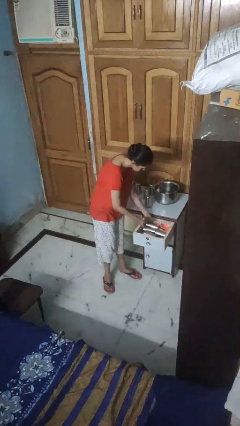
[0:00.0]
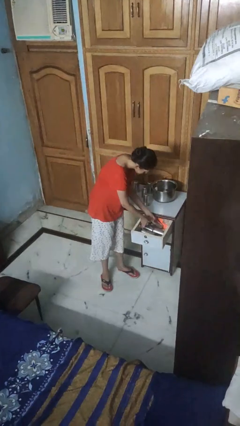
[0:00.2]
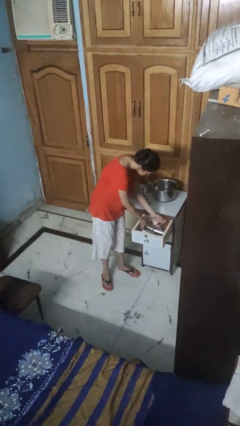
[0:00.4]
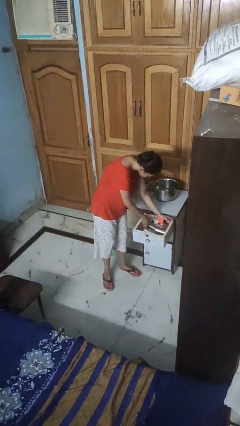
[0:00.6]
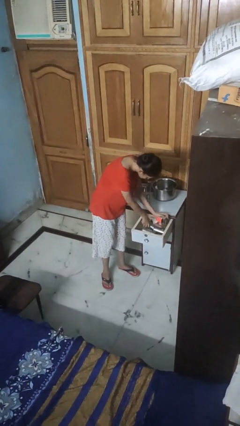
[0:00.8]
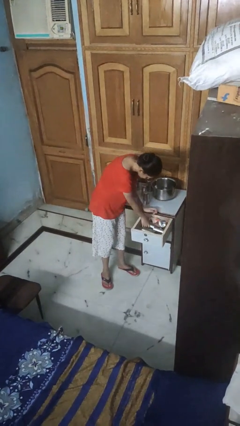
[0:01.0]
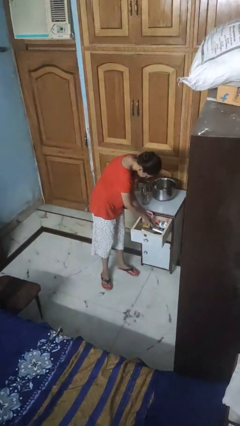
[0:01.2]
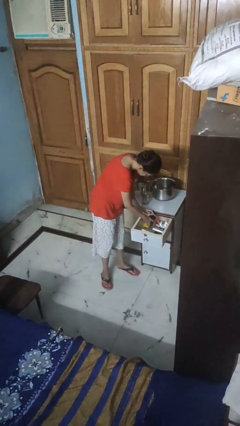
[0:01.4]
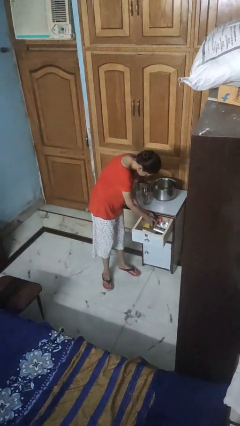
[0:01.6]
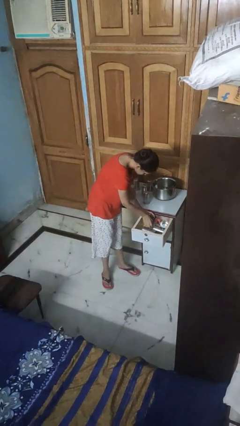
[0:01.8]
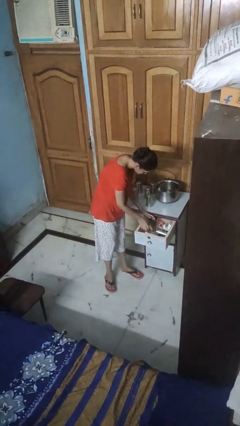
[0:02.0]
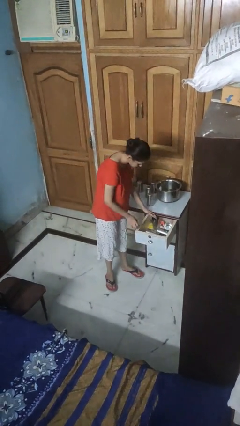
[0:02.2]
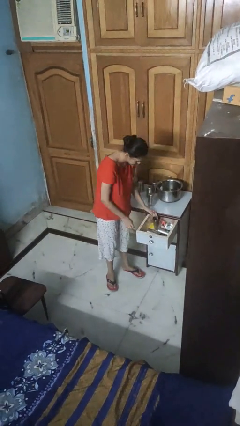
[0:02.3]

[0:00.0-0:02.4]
person searches in kitchen drawer

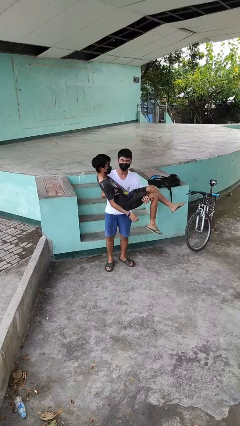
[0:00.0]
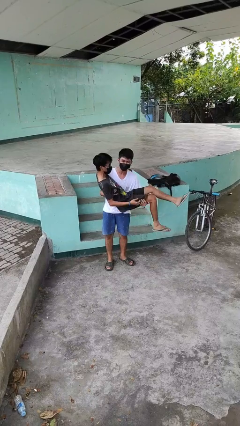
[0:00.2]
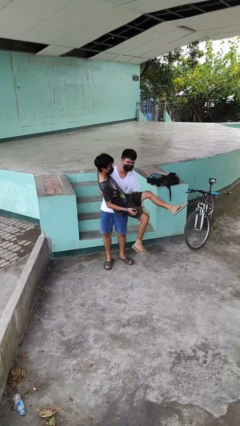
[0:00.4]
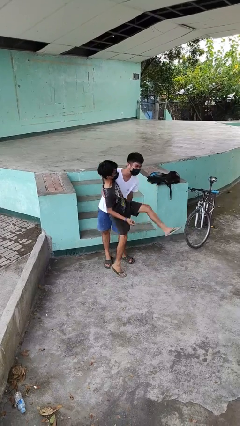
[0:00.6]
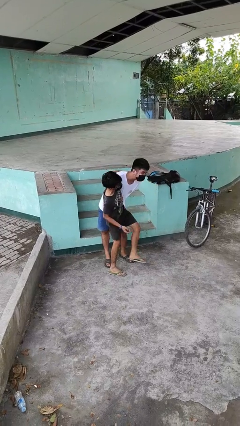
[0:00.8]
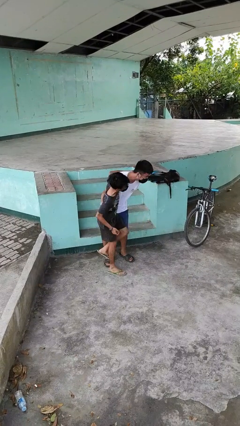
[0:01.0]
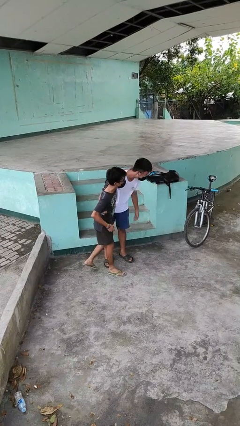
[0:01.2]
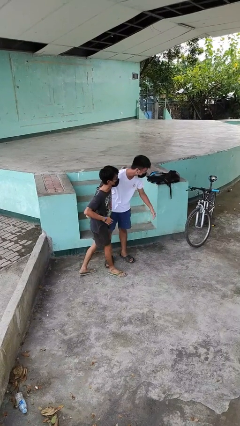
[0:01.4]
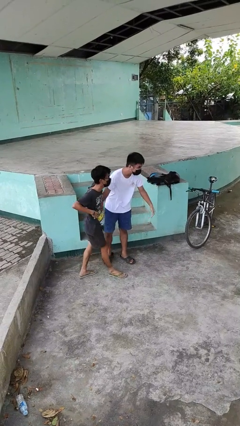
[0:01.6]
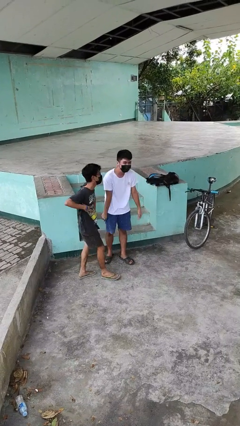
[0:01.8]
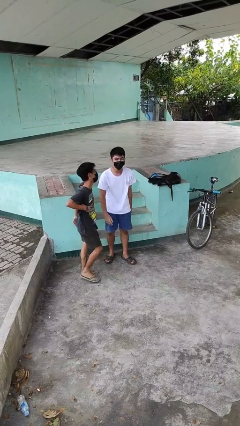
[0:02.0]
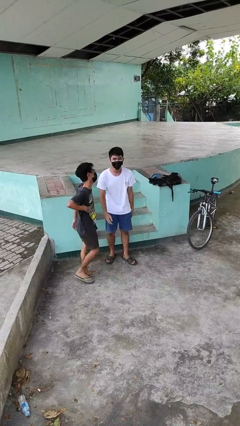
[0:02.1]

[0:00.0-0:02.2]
person puts down person

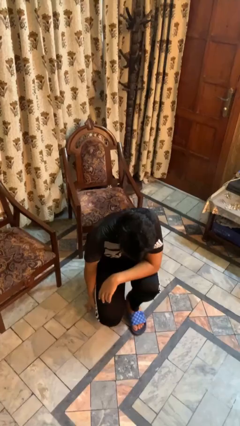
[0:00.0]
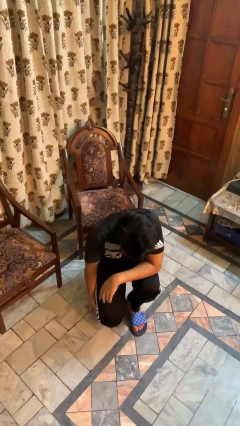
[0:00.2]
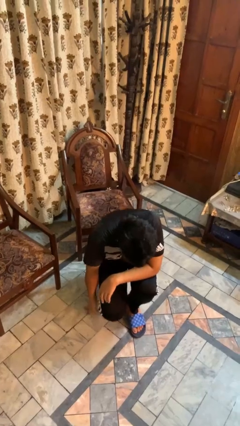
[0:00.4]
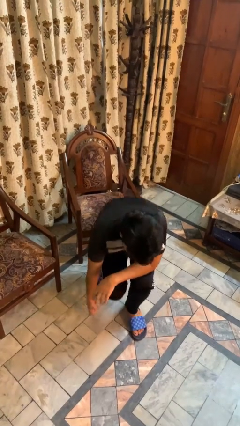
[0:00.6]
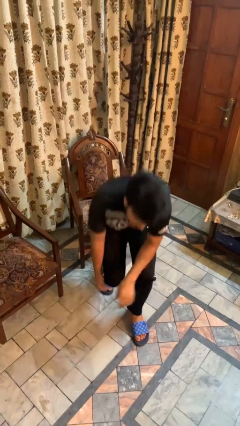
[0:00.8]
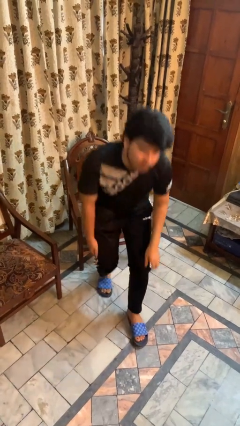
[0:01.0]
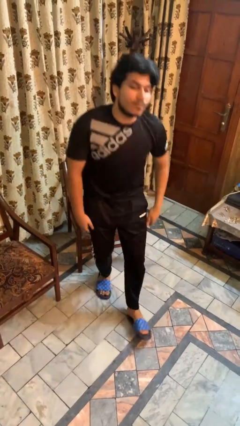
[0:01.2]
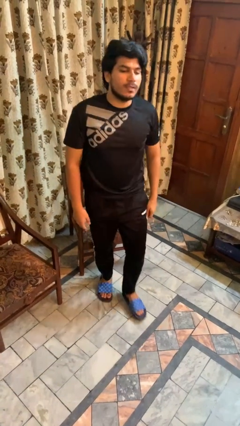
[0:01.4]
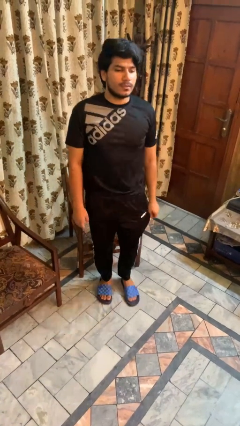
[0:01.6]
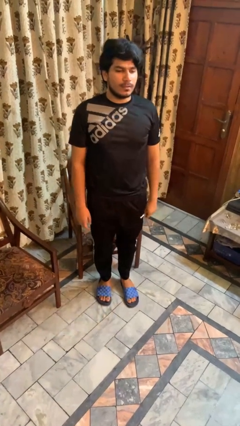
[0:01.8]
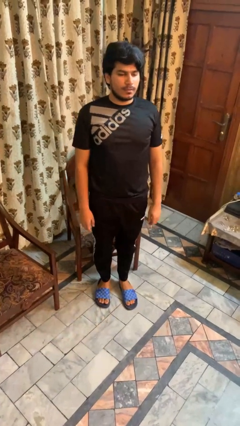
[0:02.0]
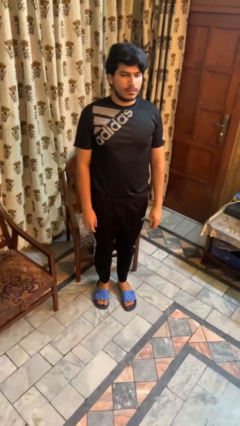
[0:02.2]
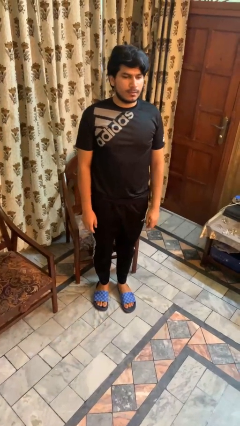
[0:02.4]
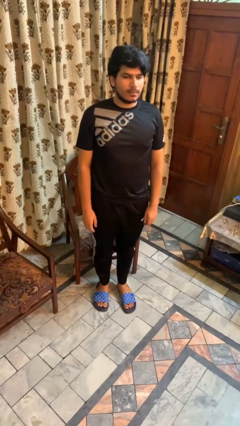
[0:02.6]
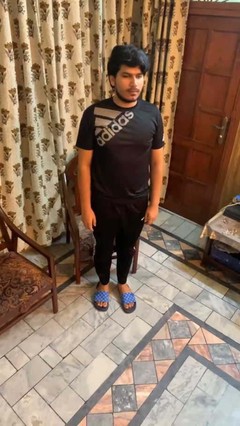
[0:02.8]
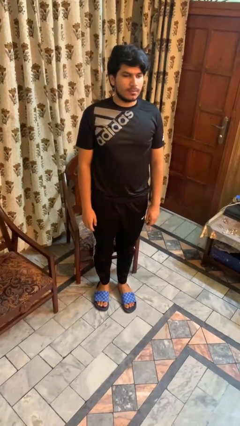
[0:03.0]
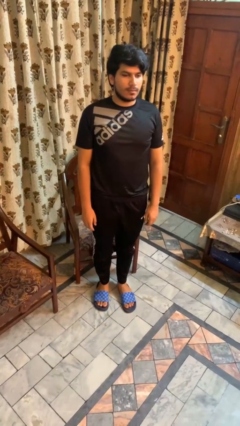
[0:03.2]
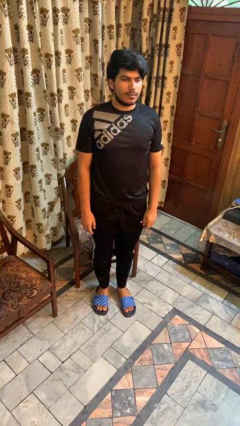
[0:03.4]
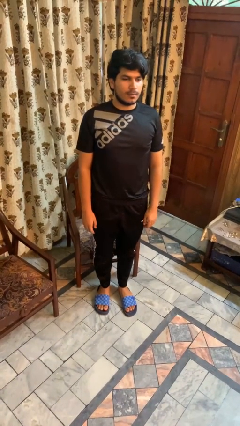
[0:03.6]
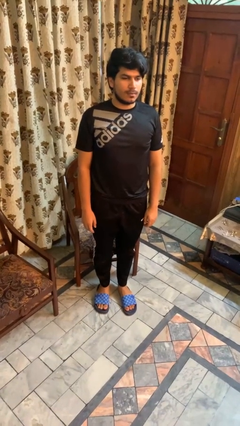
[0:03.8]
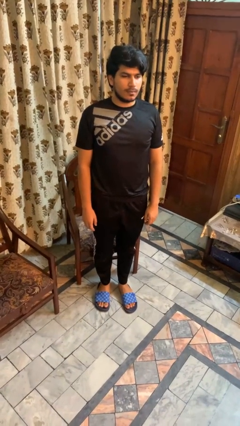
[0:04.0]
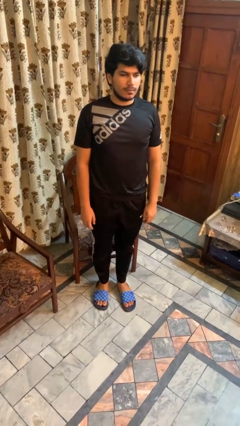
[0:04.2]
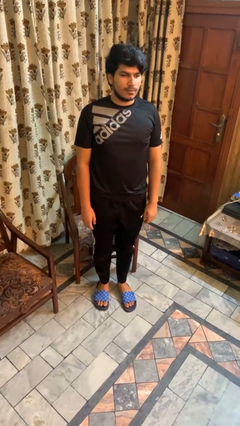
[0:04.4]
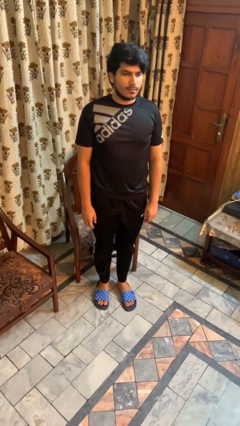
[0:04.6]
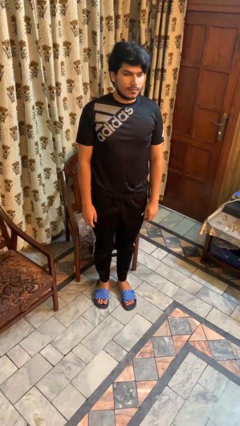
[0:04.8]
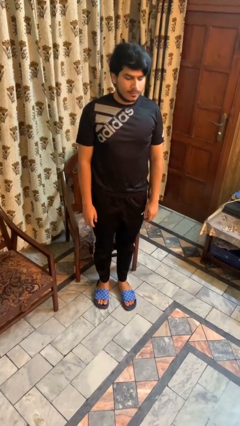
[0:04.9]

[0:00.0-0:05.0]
person stands up from floor

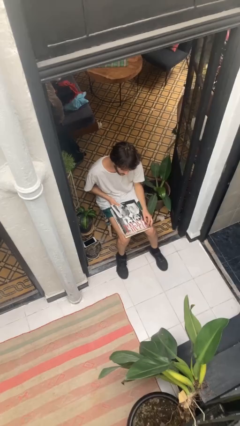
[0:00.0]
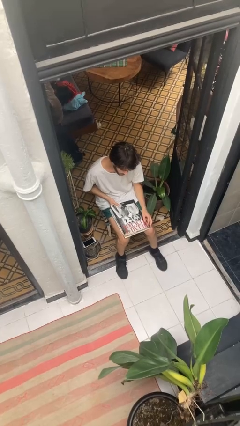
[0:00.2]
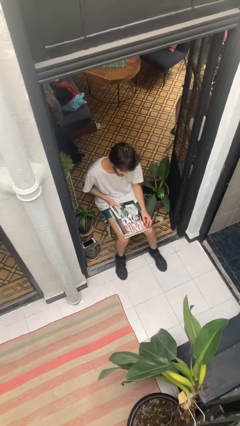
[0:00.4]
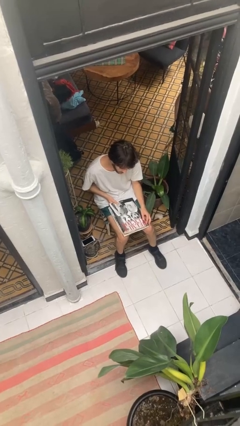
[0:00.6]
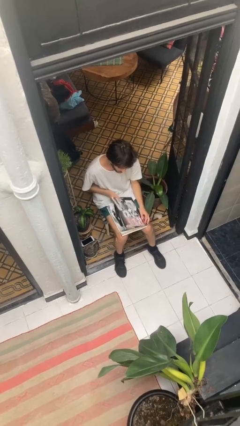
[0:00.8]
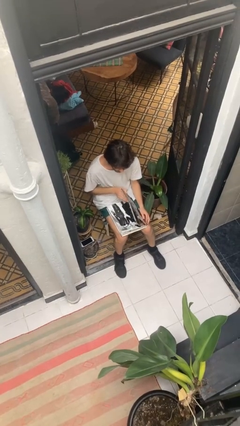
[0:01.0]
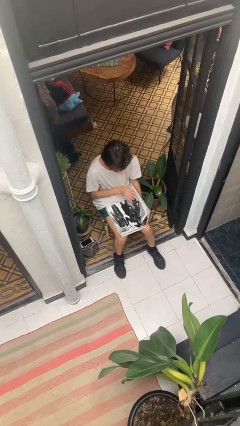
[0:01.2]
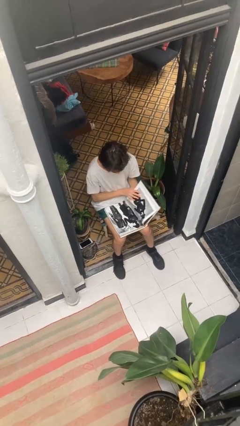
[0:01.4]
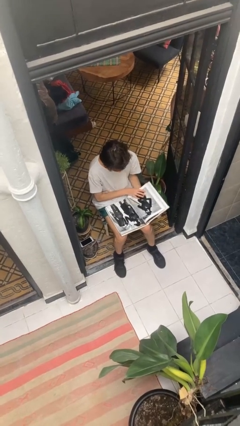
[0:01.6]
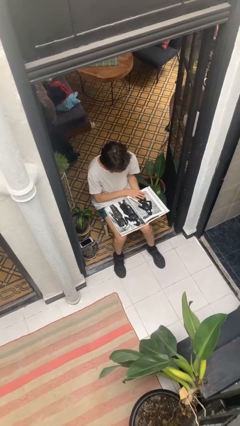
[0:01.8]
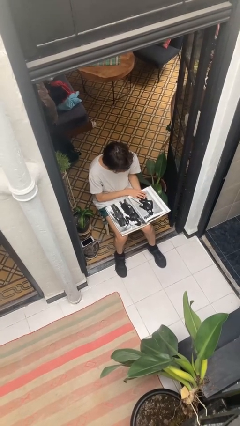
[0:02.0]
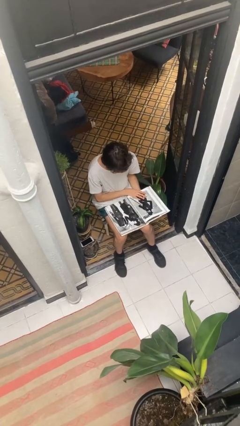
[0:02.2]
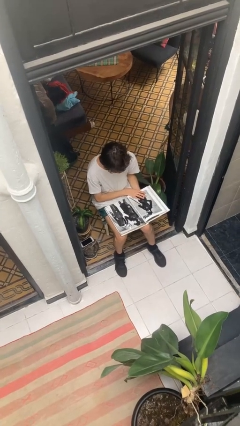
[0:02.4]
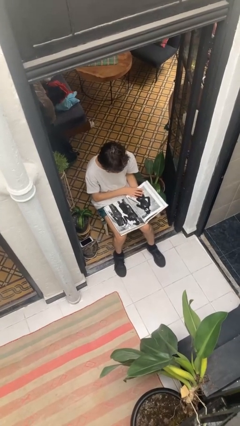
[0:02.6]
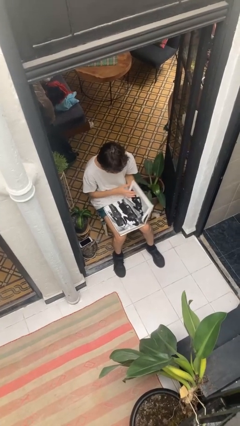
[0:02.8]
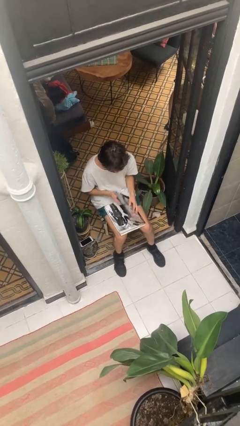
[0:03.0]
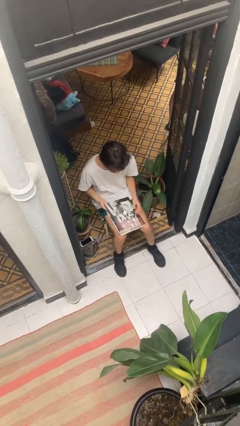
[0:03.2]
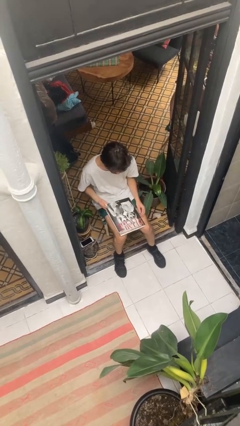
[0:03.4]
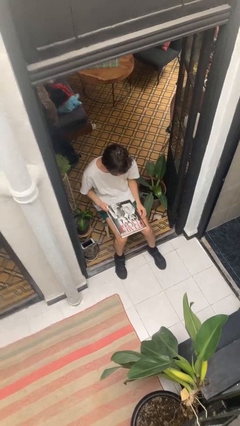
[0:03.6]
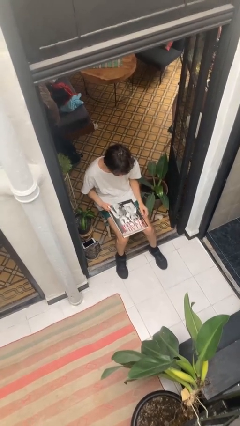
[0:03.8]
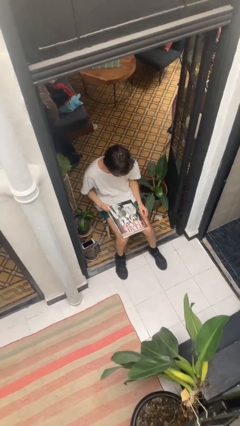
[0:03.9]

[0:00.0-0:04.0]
person reads document

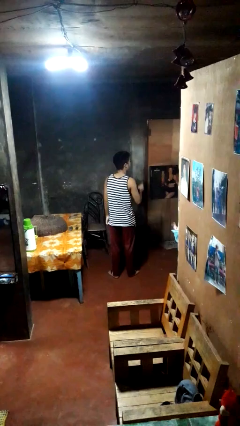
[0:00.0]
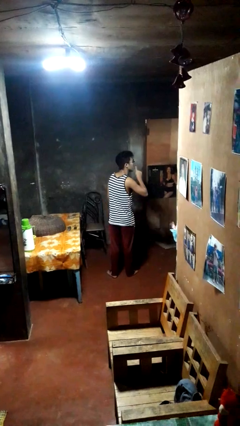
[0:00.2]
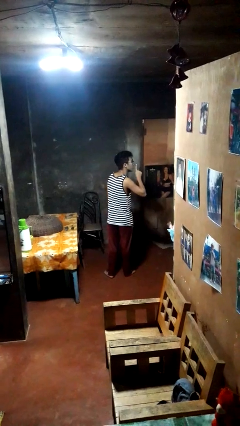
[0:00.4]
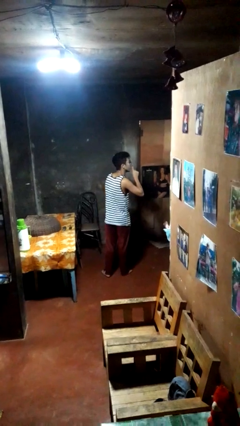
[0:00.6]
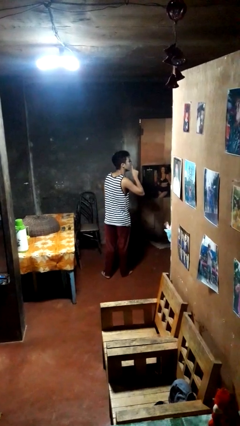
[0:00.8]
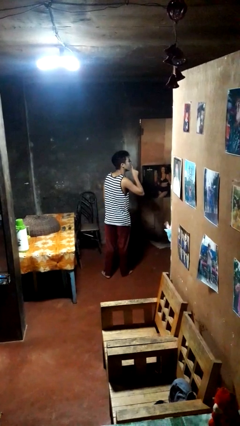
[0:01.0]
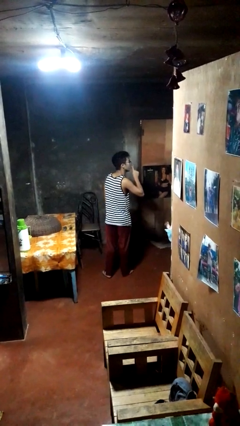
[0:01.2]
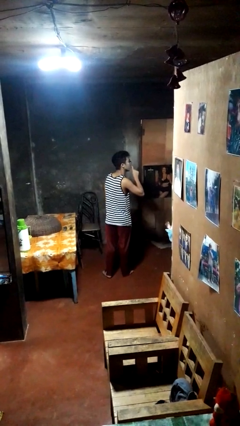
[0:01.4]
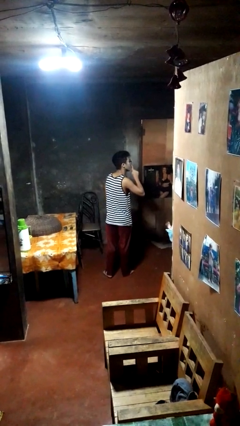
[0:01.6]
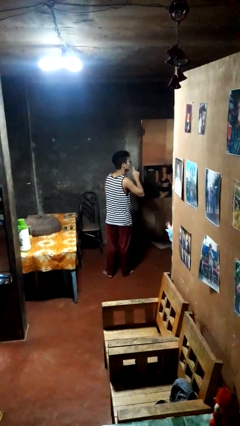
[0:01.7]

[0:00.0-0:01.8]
person gestures be quiet

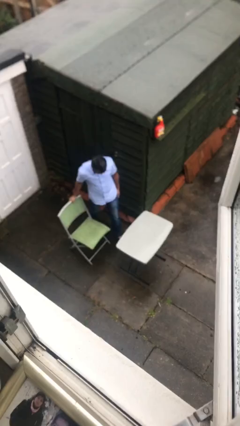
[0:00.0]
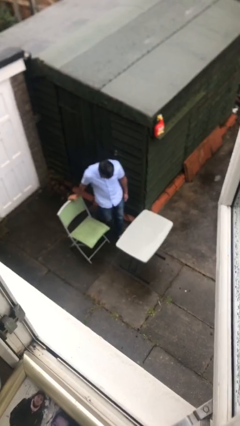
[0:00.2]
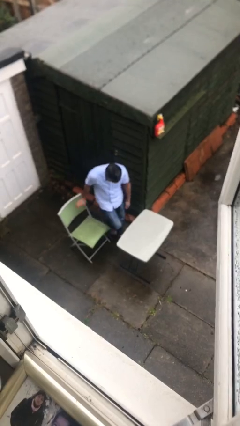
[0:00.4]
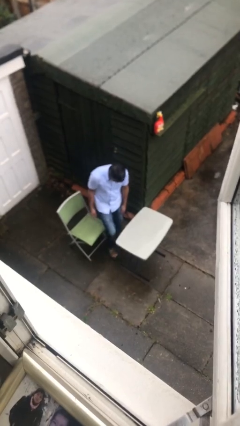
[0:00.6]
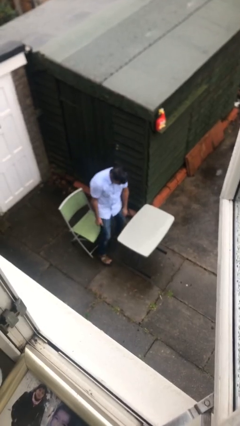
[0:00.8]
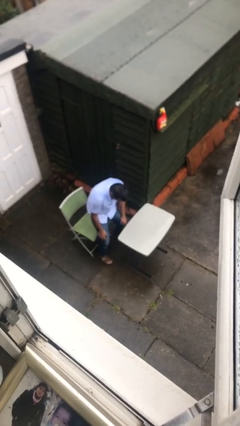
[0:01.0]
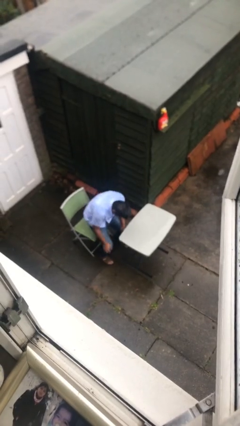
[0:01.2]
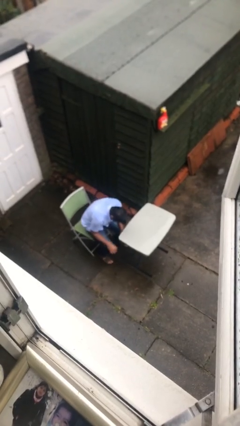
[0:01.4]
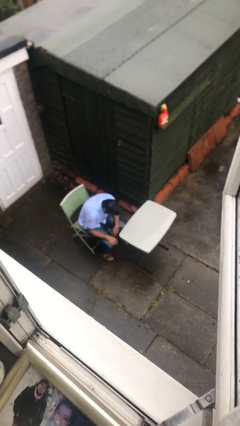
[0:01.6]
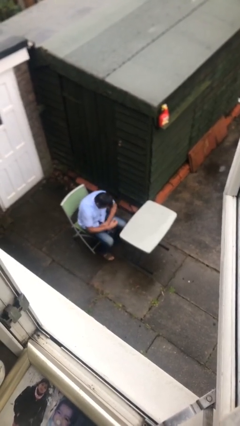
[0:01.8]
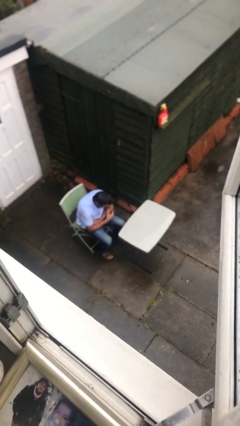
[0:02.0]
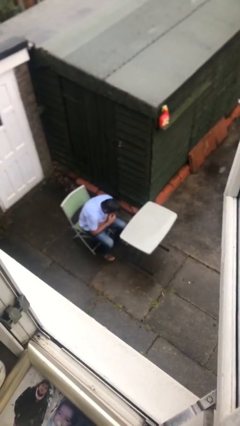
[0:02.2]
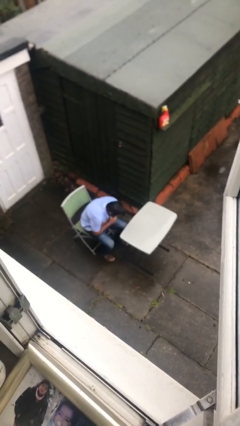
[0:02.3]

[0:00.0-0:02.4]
person sits down
